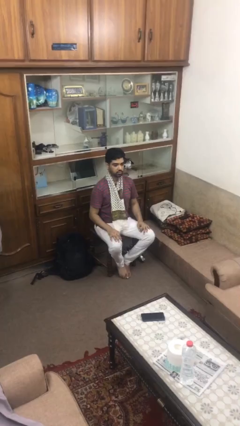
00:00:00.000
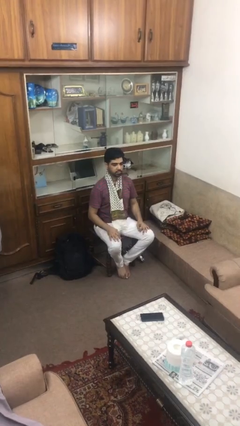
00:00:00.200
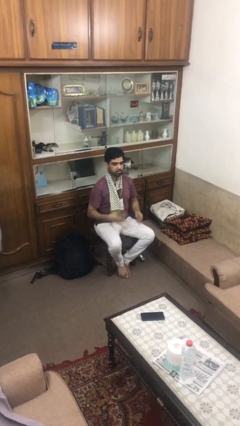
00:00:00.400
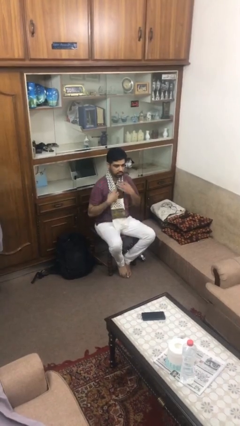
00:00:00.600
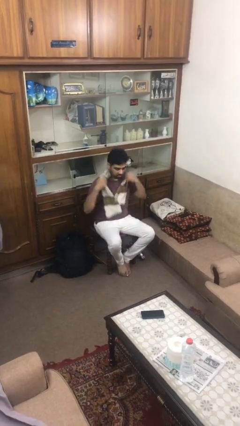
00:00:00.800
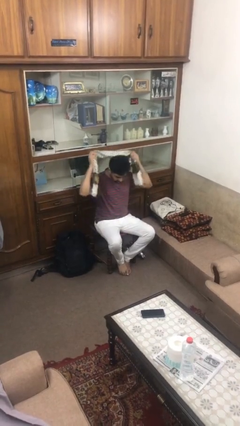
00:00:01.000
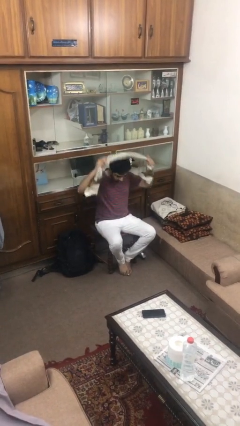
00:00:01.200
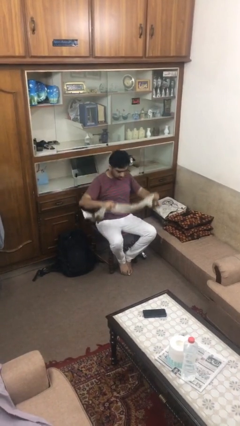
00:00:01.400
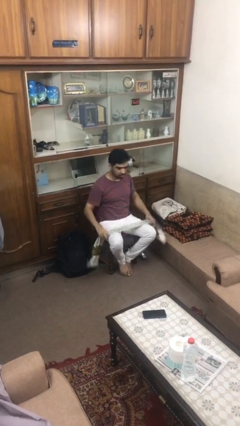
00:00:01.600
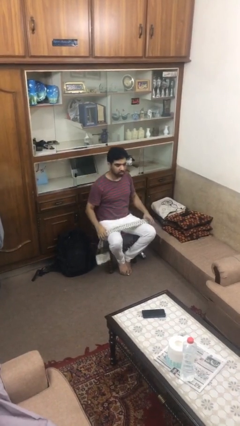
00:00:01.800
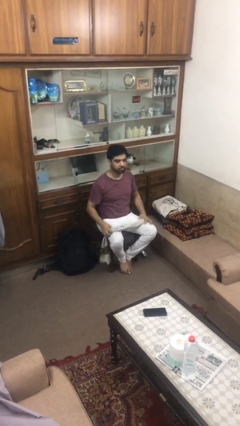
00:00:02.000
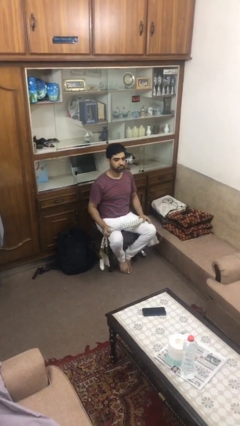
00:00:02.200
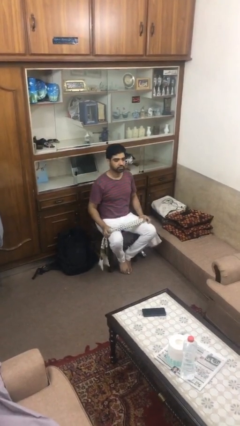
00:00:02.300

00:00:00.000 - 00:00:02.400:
person takes off scarf

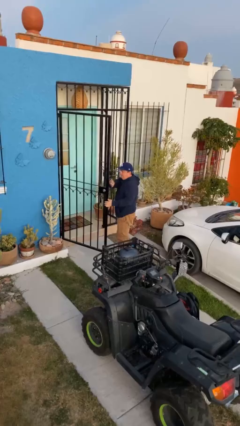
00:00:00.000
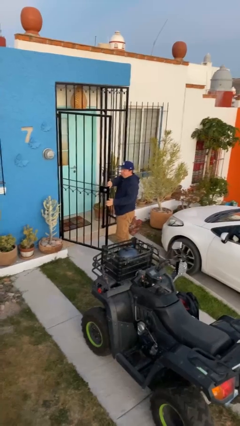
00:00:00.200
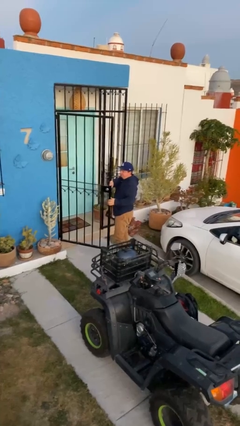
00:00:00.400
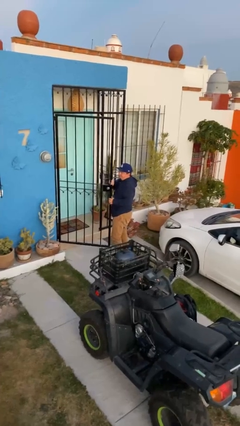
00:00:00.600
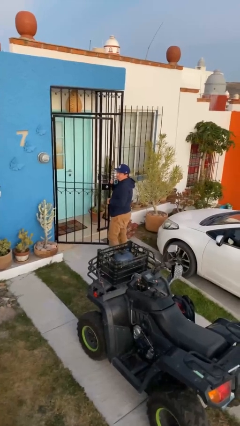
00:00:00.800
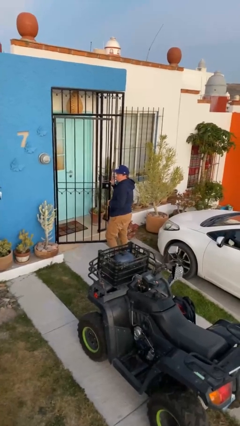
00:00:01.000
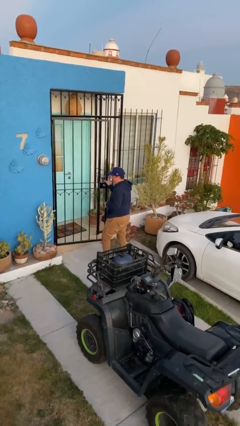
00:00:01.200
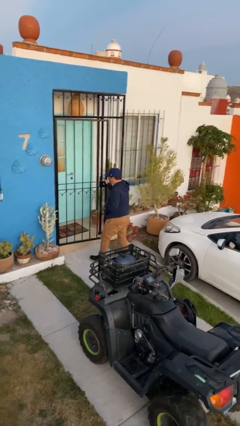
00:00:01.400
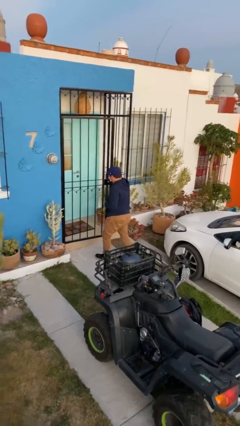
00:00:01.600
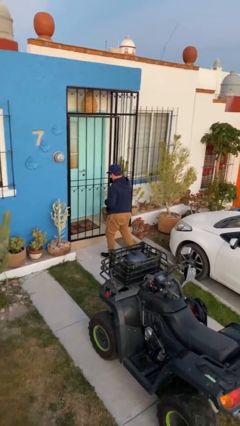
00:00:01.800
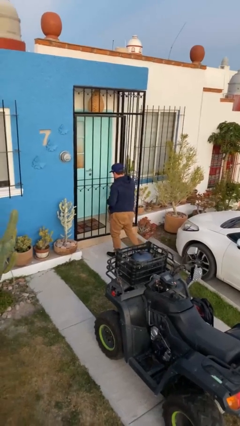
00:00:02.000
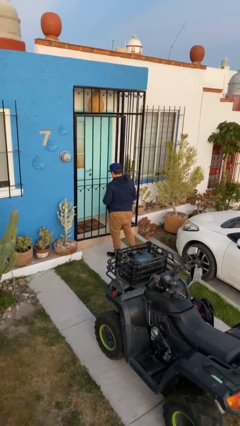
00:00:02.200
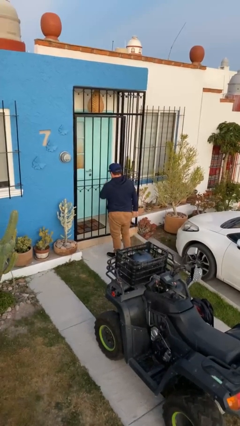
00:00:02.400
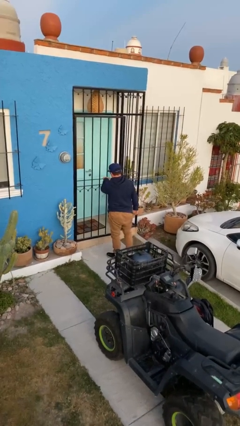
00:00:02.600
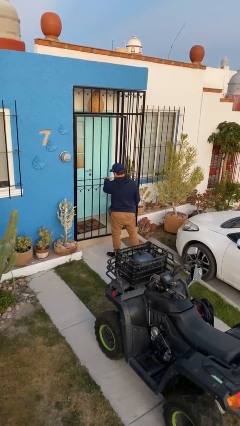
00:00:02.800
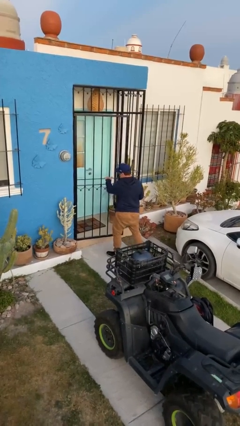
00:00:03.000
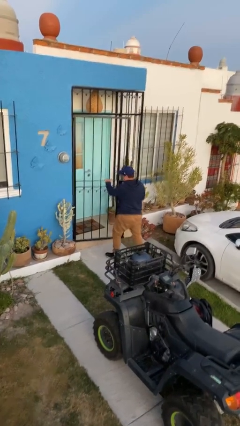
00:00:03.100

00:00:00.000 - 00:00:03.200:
person closes facility door

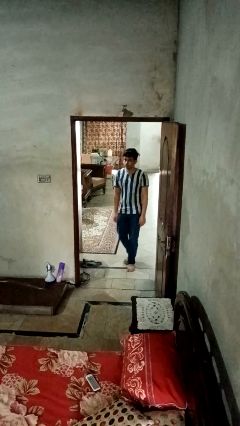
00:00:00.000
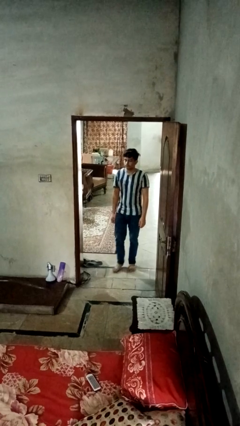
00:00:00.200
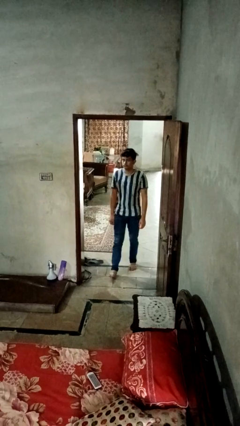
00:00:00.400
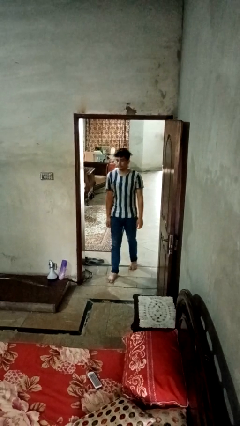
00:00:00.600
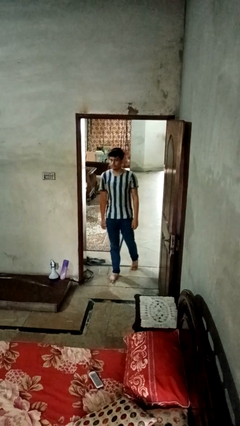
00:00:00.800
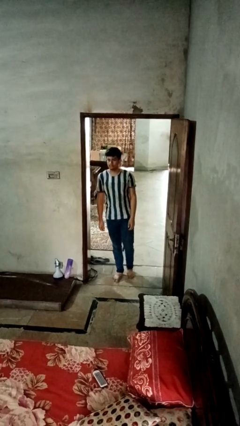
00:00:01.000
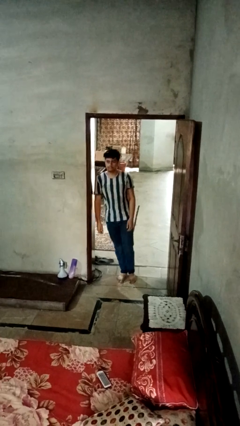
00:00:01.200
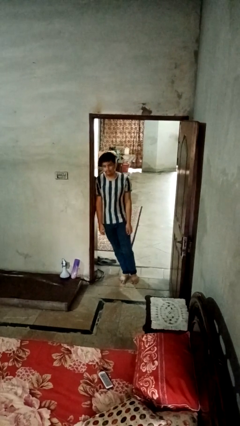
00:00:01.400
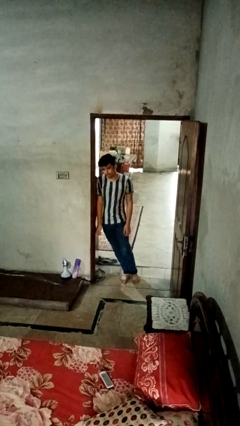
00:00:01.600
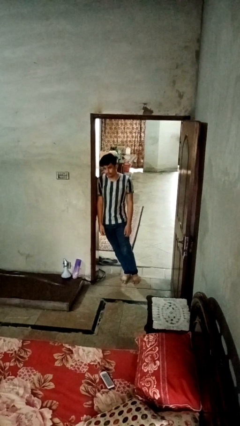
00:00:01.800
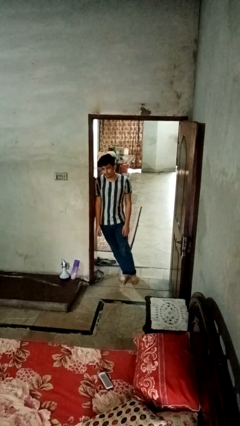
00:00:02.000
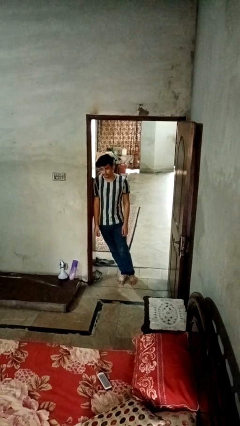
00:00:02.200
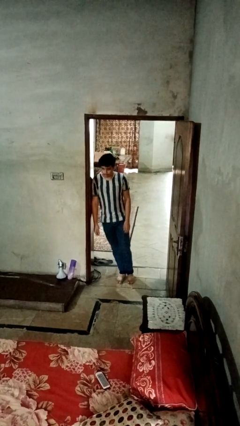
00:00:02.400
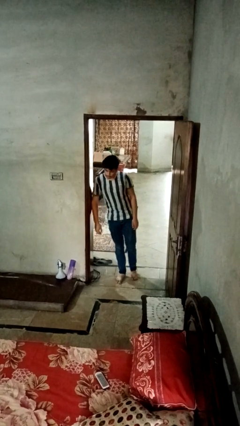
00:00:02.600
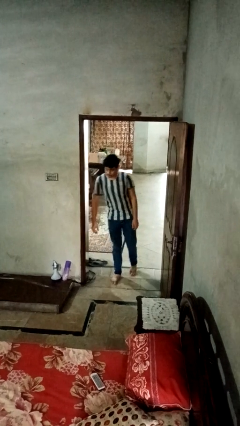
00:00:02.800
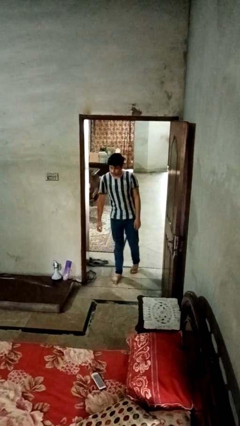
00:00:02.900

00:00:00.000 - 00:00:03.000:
person bumps into wall

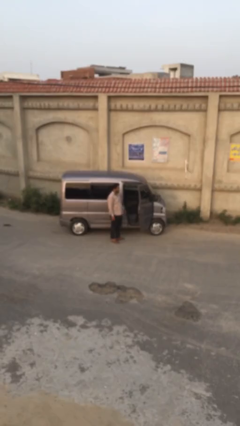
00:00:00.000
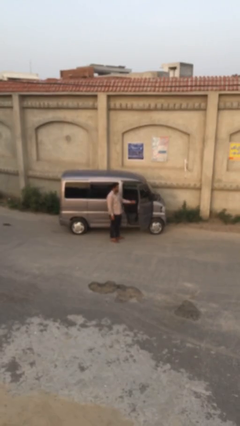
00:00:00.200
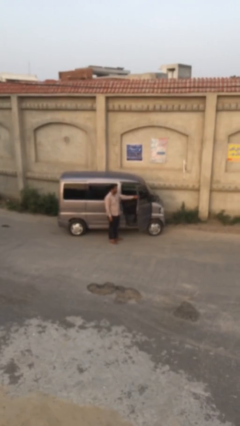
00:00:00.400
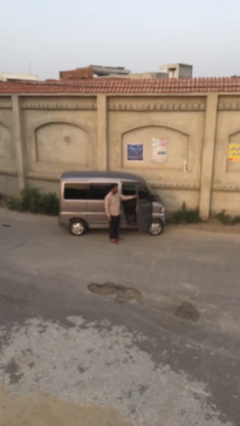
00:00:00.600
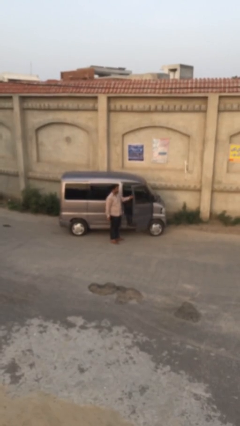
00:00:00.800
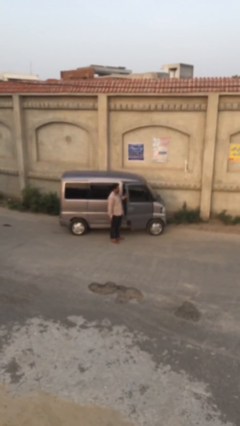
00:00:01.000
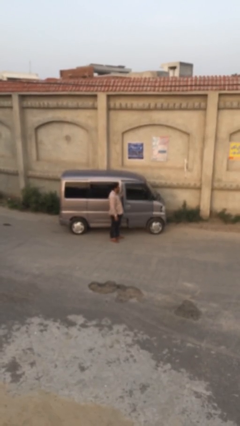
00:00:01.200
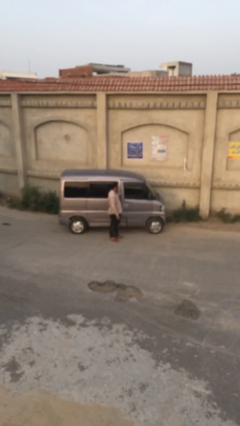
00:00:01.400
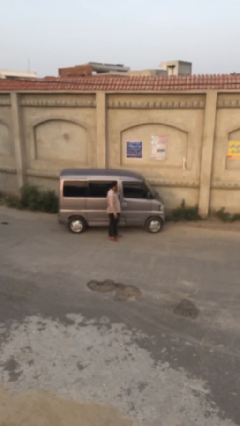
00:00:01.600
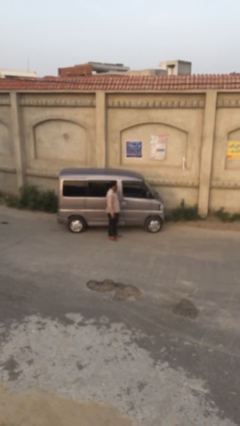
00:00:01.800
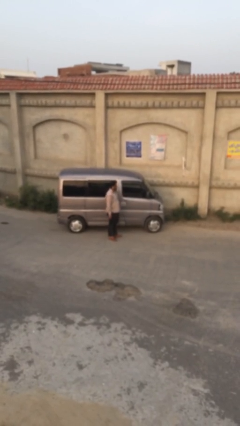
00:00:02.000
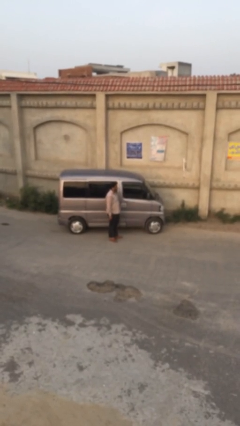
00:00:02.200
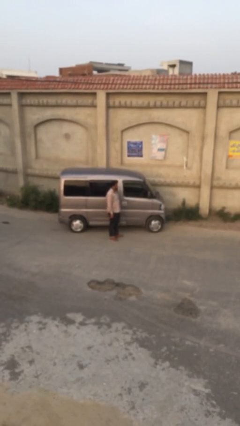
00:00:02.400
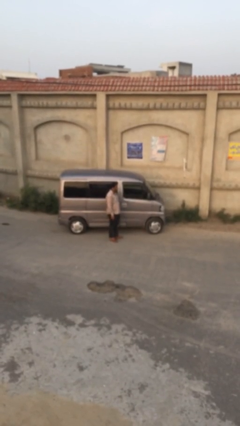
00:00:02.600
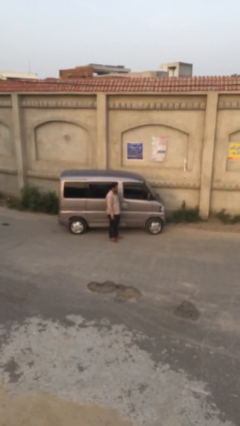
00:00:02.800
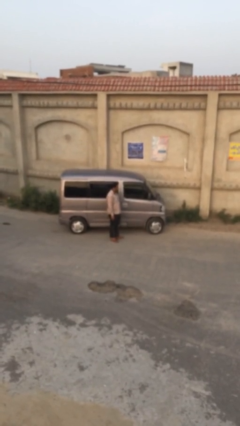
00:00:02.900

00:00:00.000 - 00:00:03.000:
person closes car door

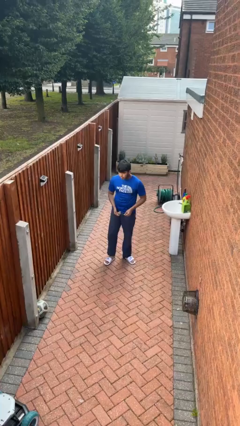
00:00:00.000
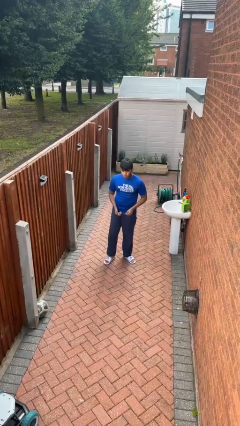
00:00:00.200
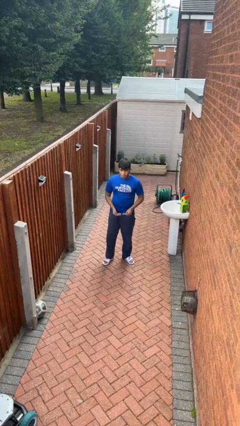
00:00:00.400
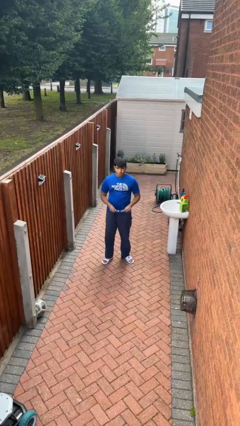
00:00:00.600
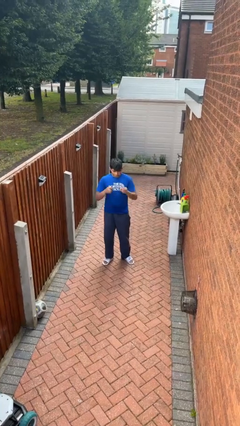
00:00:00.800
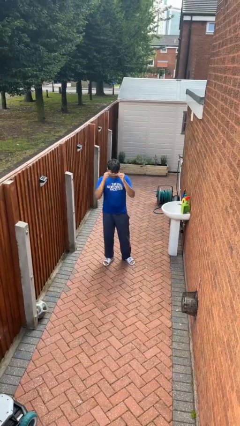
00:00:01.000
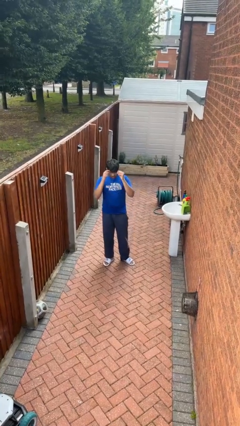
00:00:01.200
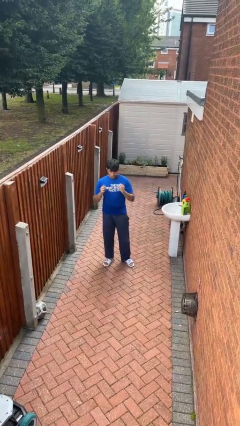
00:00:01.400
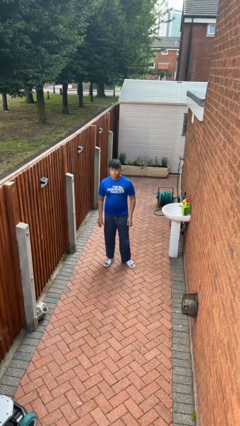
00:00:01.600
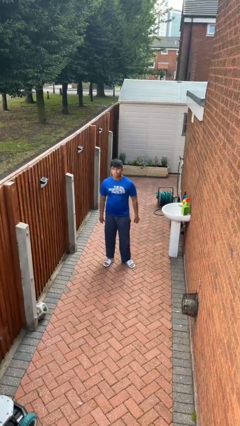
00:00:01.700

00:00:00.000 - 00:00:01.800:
person puts on glasses

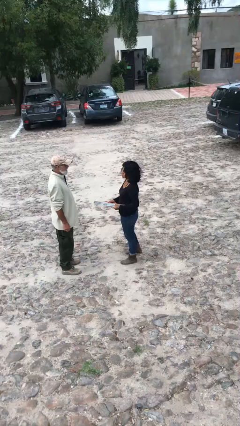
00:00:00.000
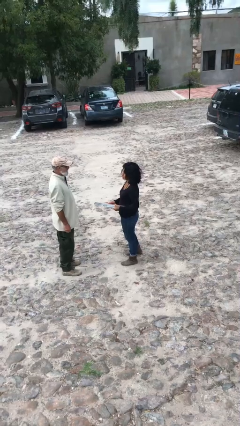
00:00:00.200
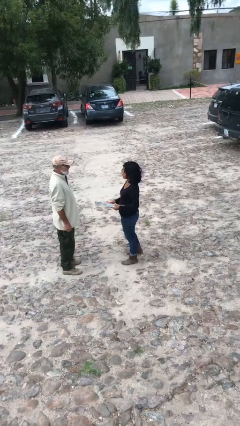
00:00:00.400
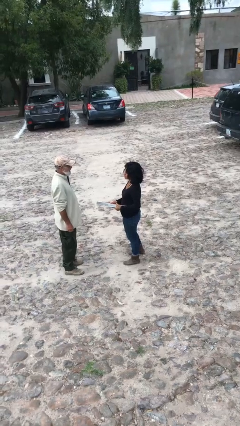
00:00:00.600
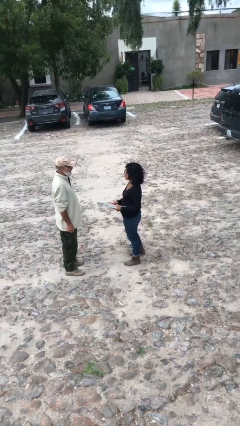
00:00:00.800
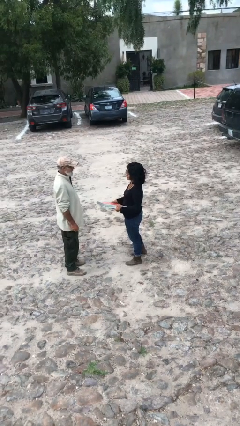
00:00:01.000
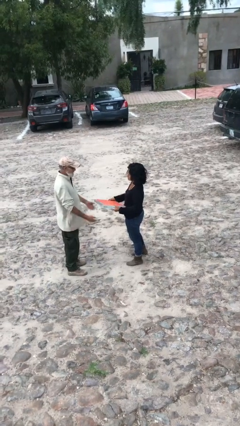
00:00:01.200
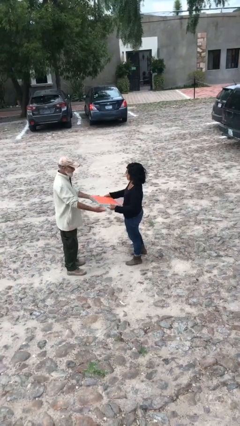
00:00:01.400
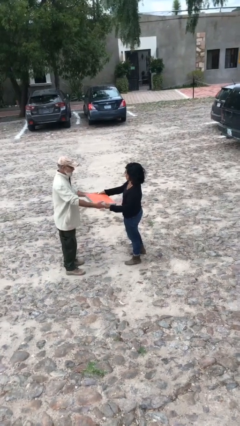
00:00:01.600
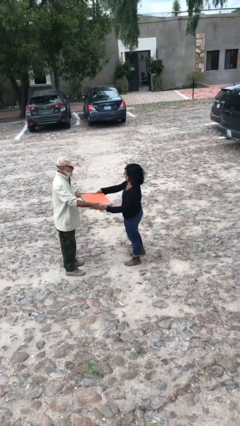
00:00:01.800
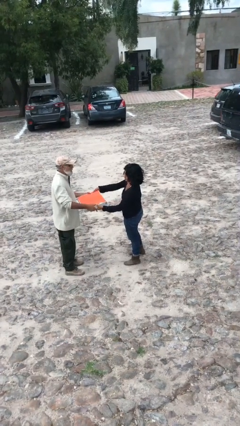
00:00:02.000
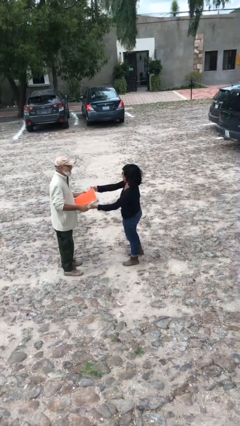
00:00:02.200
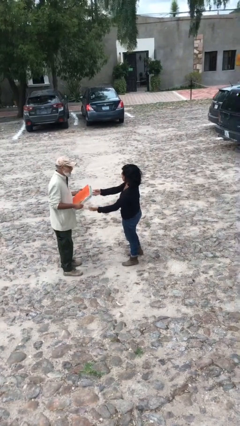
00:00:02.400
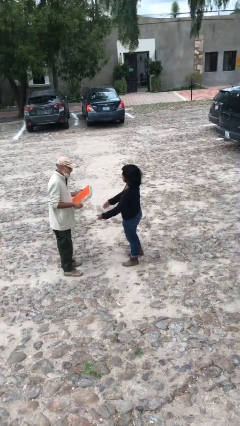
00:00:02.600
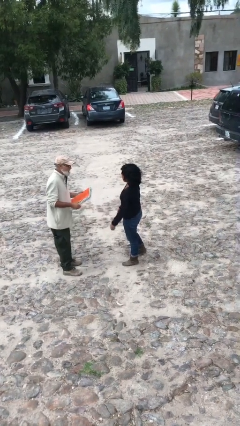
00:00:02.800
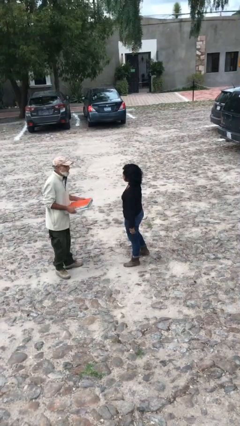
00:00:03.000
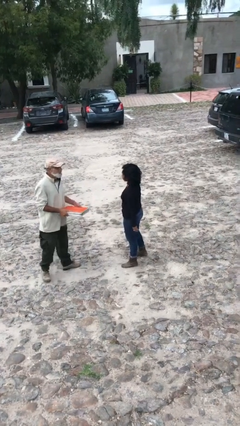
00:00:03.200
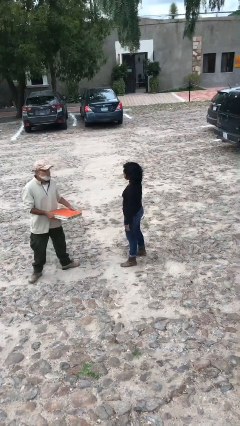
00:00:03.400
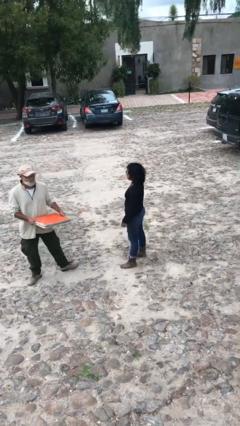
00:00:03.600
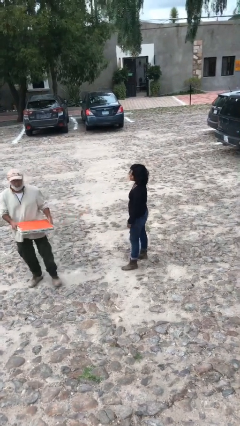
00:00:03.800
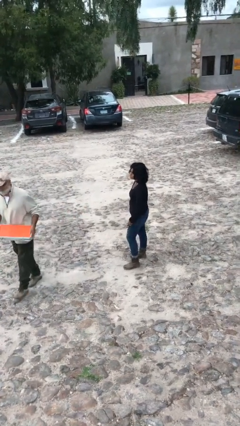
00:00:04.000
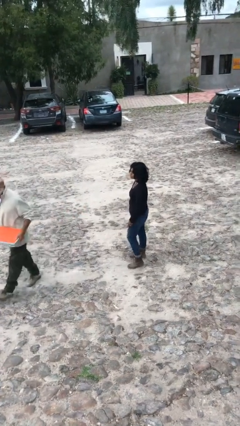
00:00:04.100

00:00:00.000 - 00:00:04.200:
person transfers object to person
